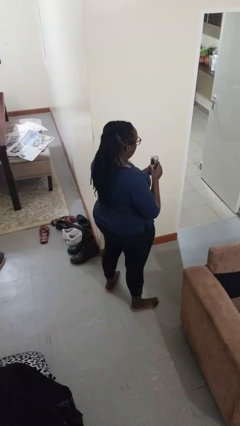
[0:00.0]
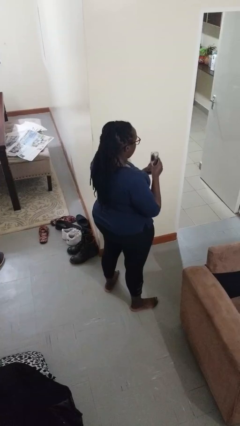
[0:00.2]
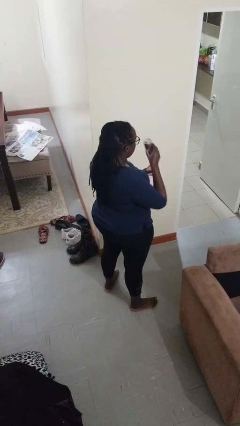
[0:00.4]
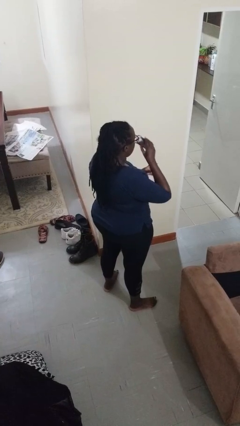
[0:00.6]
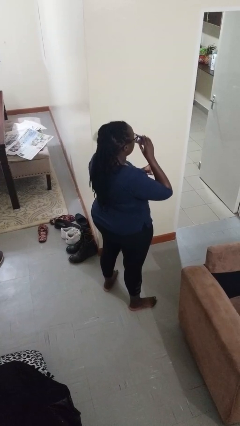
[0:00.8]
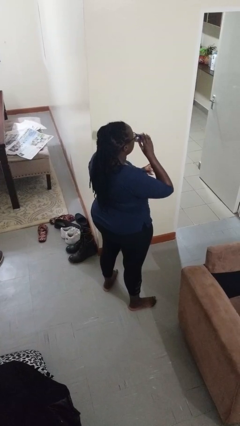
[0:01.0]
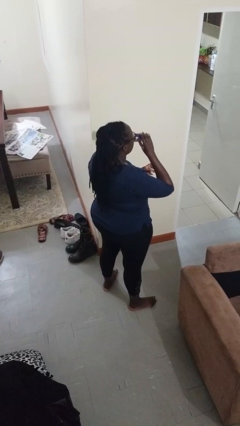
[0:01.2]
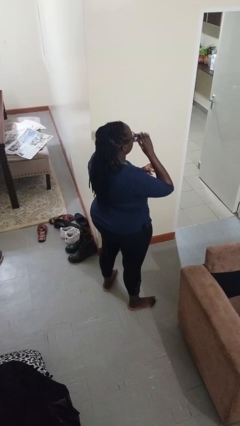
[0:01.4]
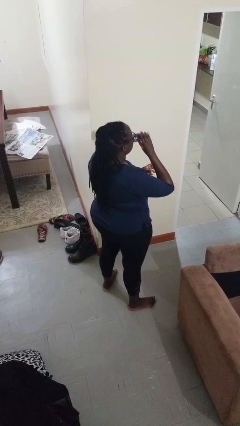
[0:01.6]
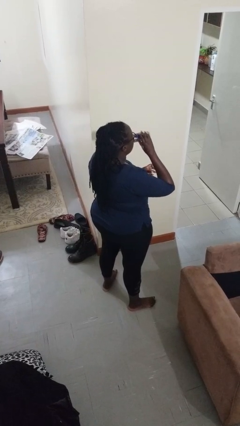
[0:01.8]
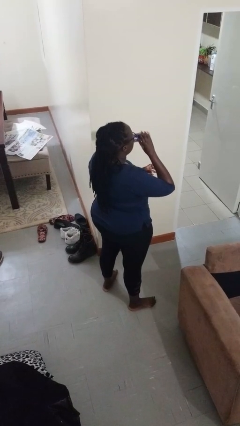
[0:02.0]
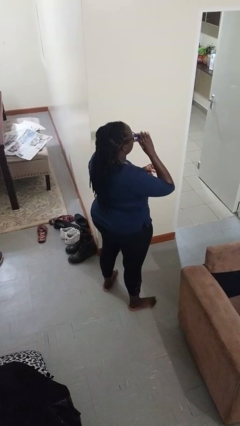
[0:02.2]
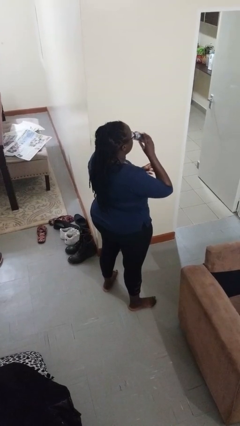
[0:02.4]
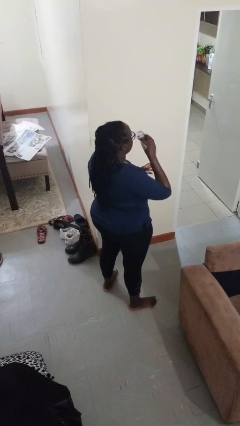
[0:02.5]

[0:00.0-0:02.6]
person drinks from beverage can

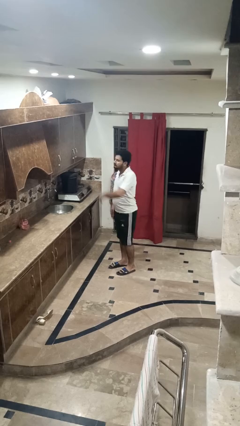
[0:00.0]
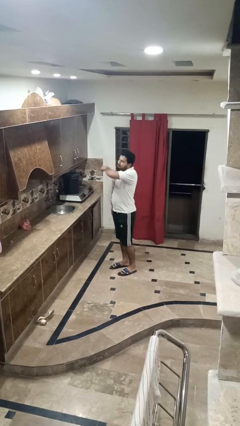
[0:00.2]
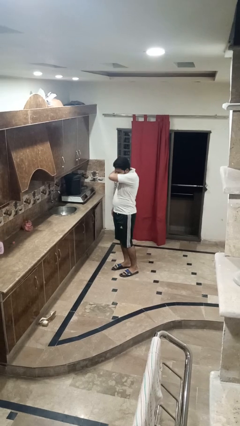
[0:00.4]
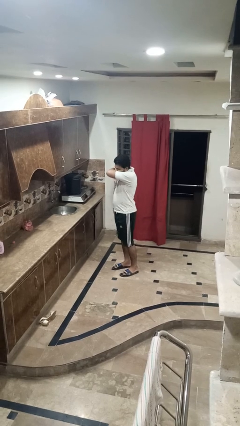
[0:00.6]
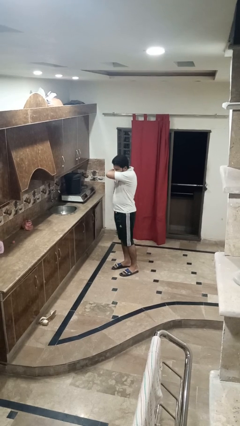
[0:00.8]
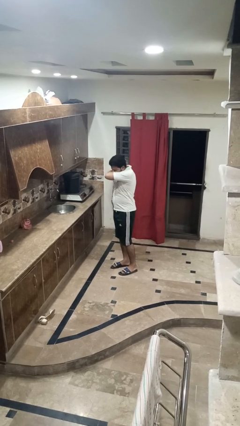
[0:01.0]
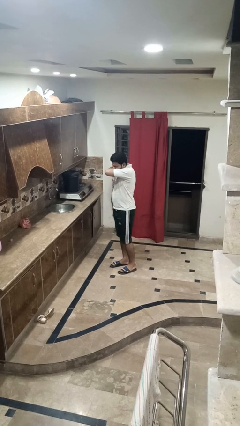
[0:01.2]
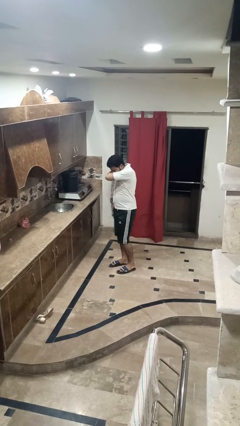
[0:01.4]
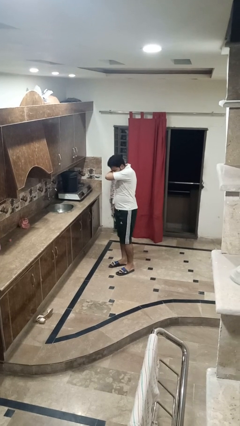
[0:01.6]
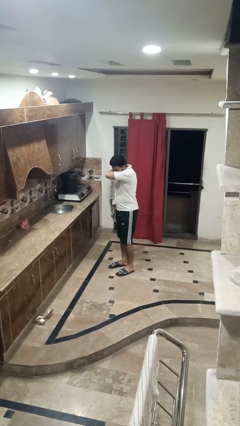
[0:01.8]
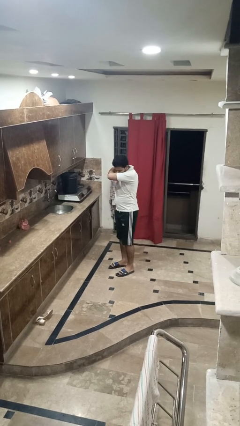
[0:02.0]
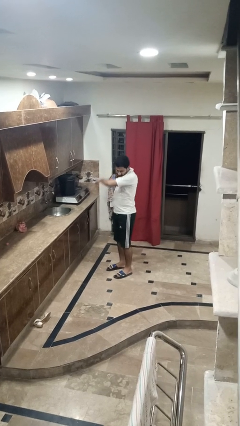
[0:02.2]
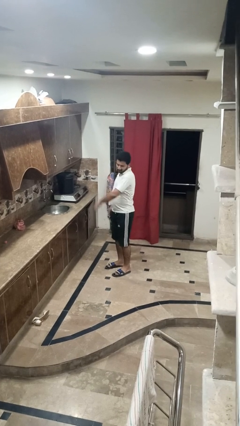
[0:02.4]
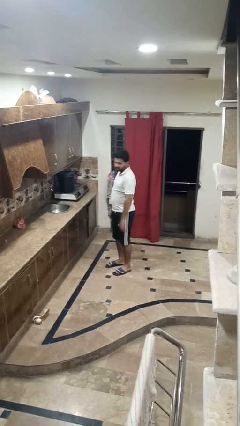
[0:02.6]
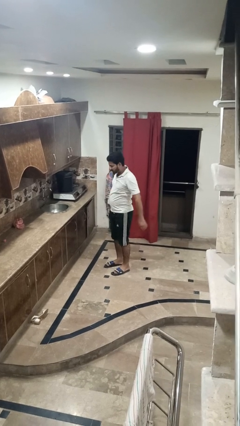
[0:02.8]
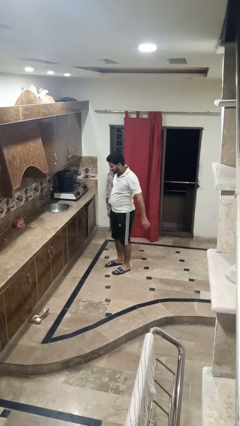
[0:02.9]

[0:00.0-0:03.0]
person sneezes into arm

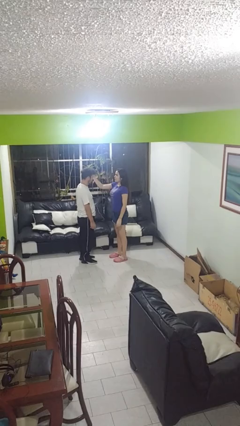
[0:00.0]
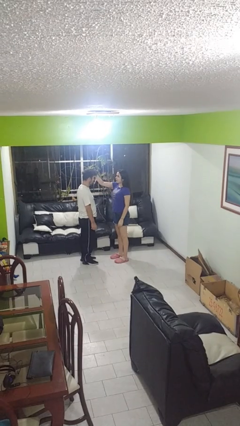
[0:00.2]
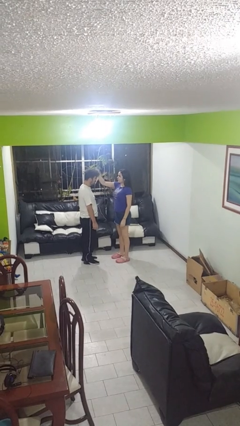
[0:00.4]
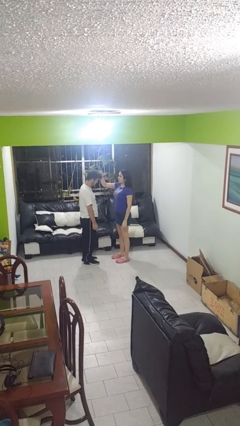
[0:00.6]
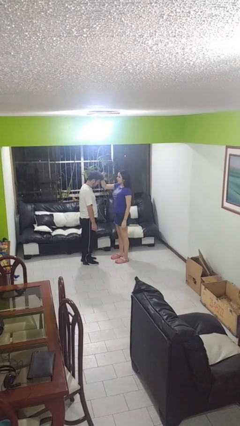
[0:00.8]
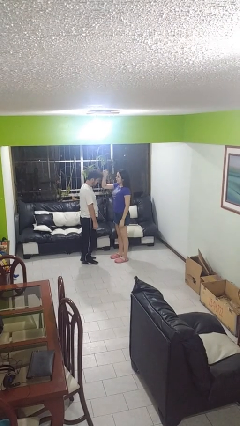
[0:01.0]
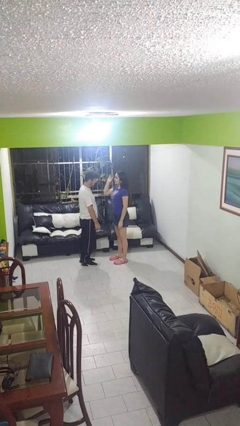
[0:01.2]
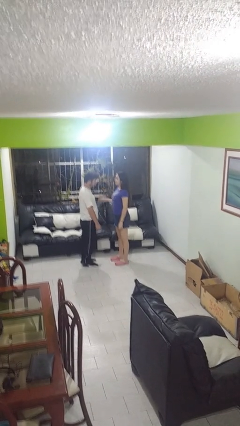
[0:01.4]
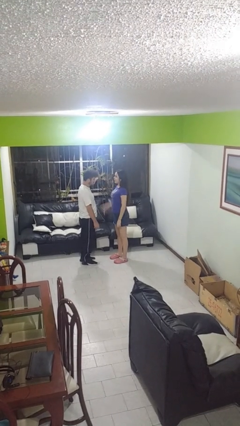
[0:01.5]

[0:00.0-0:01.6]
person grabs person by hair

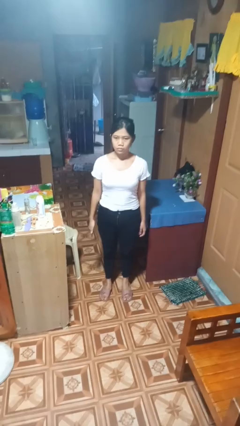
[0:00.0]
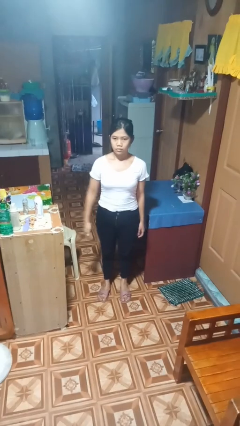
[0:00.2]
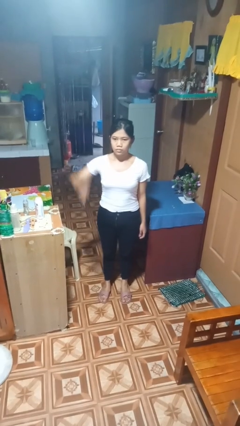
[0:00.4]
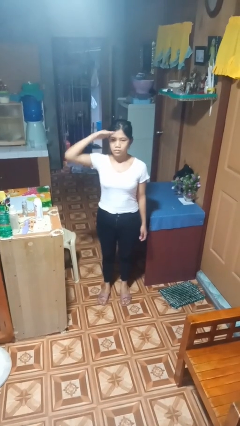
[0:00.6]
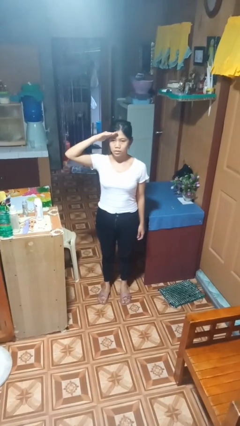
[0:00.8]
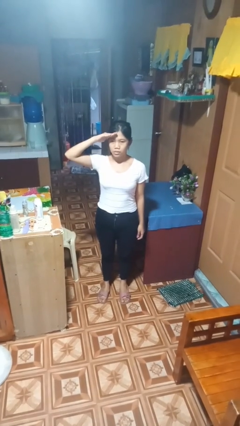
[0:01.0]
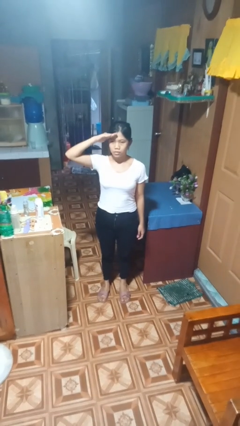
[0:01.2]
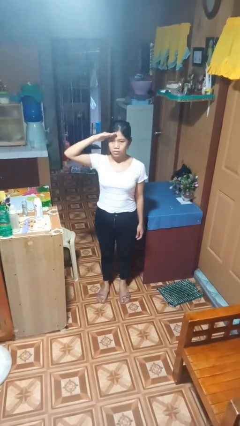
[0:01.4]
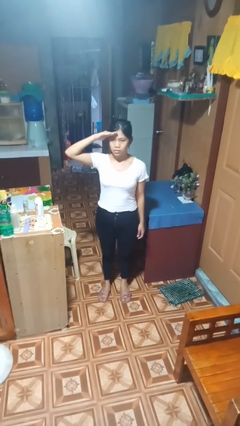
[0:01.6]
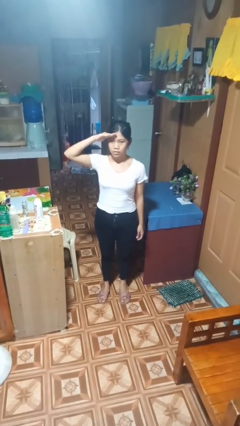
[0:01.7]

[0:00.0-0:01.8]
person salutes

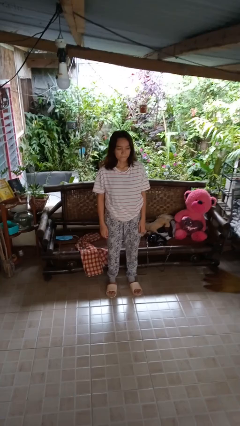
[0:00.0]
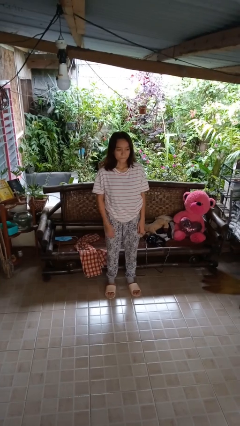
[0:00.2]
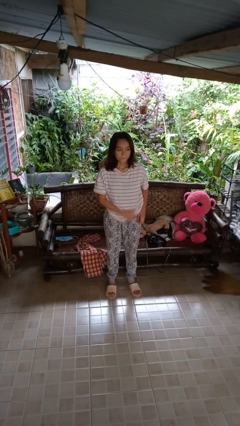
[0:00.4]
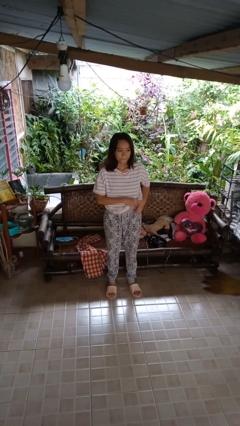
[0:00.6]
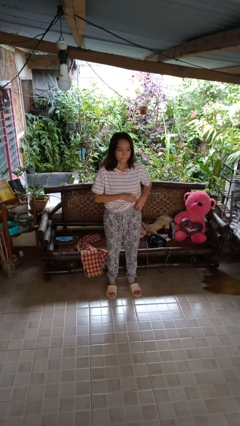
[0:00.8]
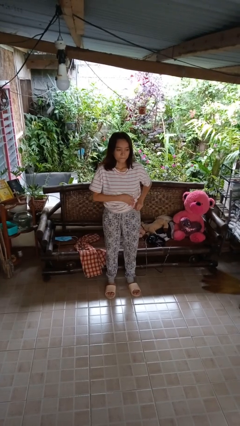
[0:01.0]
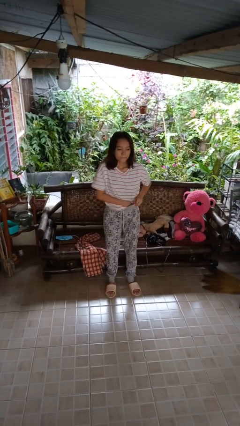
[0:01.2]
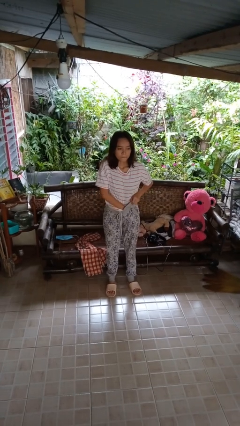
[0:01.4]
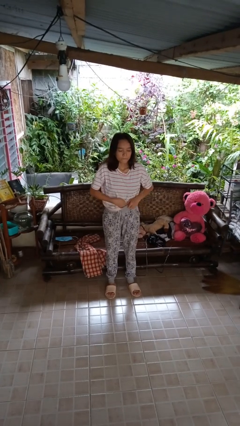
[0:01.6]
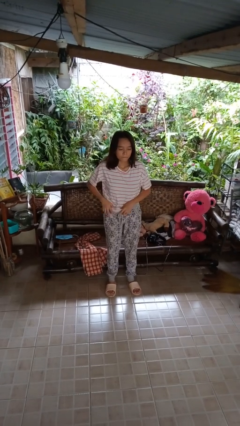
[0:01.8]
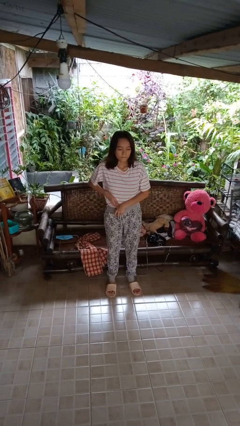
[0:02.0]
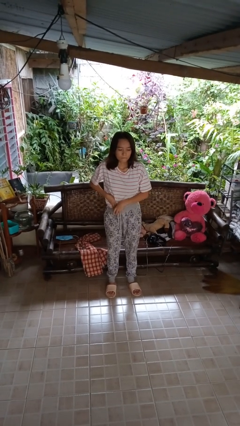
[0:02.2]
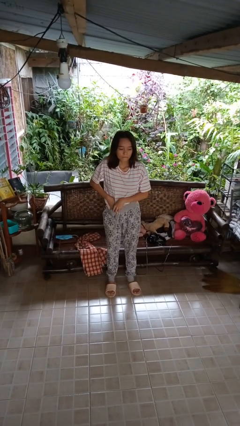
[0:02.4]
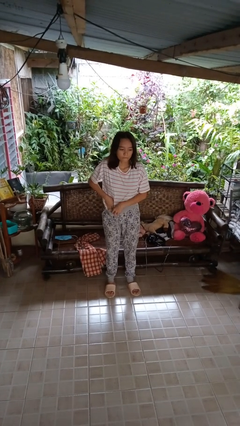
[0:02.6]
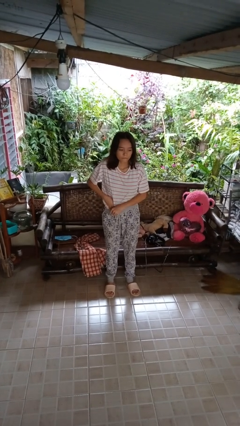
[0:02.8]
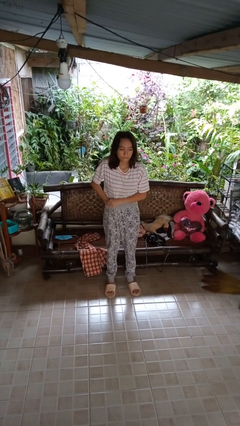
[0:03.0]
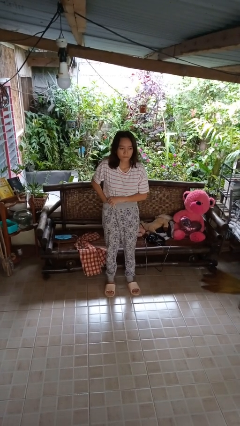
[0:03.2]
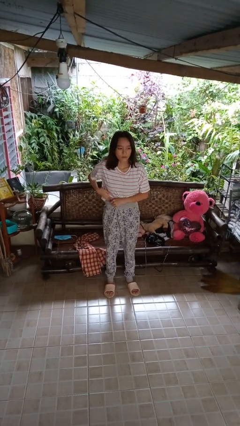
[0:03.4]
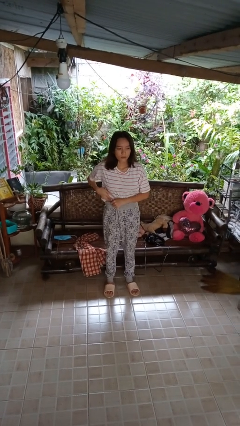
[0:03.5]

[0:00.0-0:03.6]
person tucks in shirt

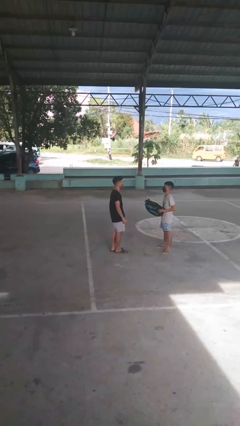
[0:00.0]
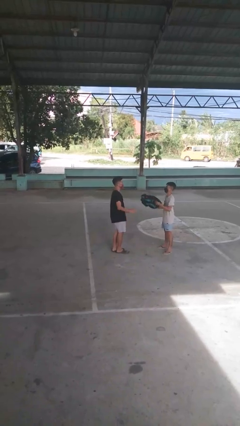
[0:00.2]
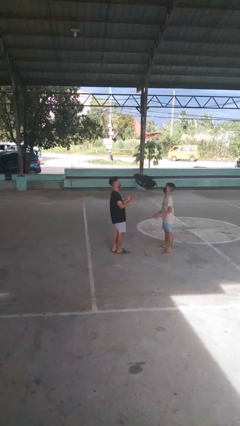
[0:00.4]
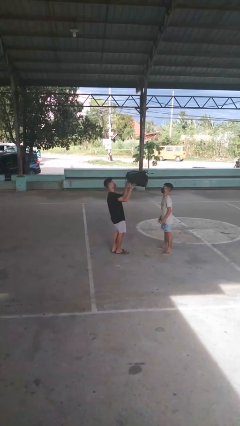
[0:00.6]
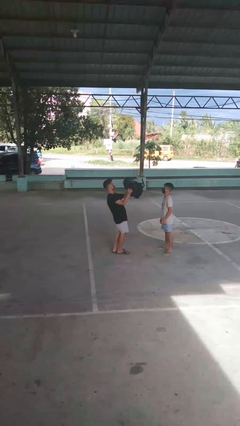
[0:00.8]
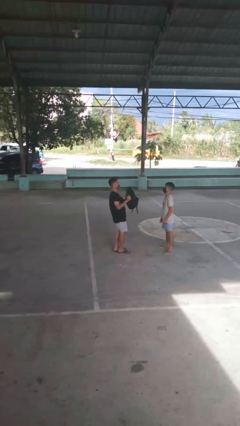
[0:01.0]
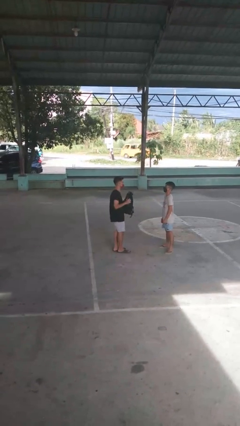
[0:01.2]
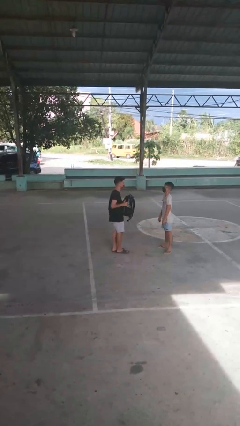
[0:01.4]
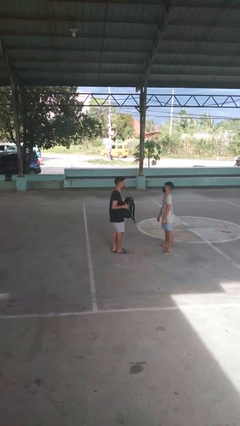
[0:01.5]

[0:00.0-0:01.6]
person catches object from person

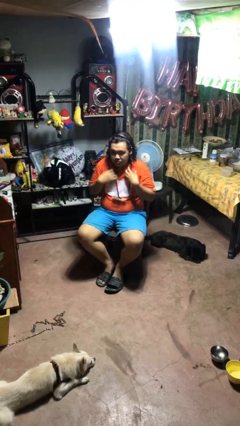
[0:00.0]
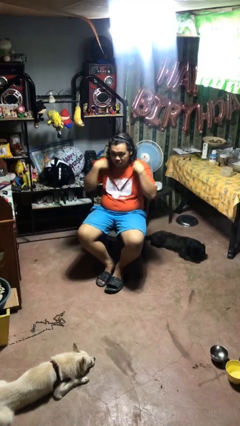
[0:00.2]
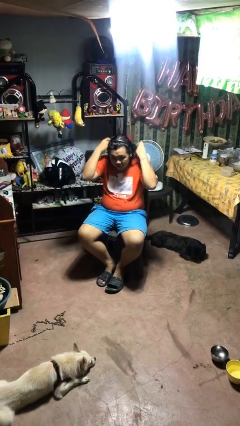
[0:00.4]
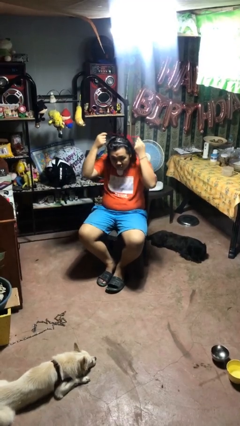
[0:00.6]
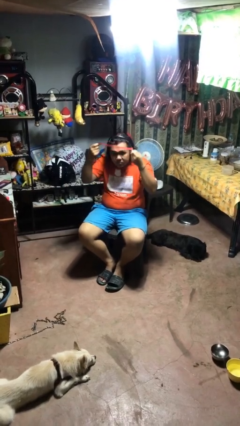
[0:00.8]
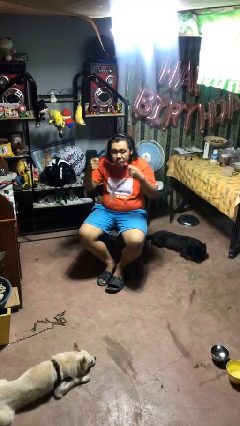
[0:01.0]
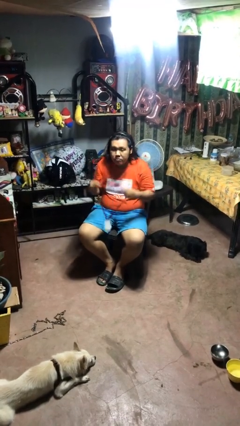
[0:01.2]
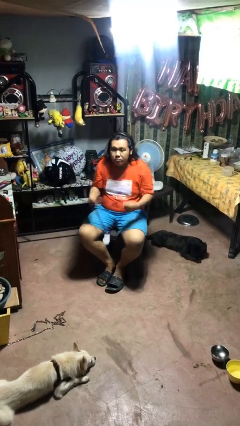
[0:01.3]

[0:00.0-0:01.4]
person takes off necklace

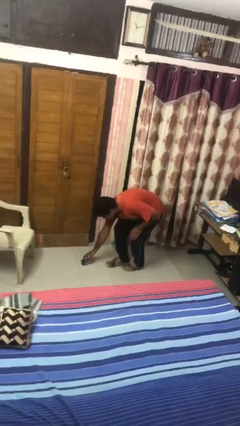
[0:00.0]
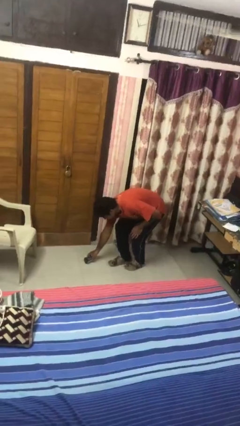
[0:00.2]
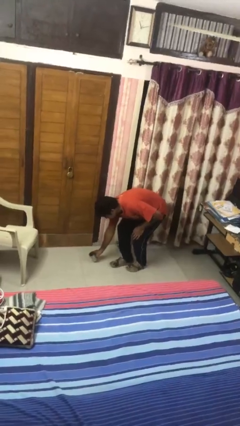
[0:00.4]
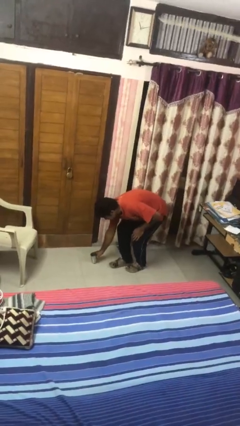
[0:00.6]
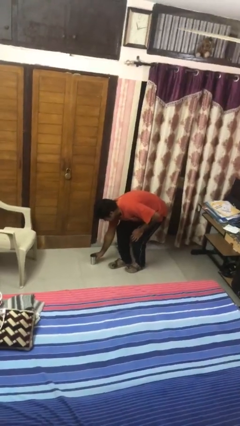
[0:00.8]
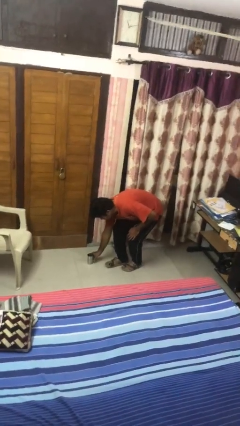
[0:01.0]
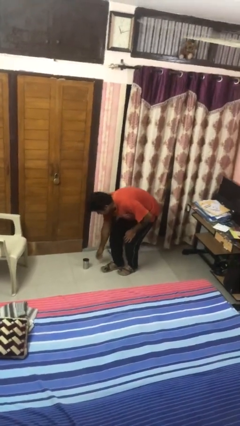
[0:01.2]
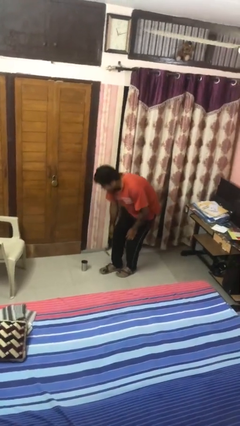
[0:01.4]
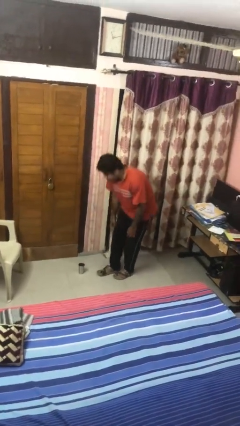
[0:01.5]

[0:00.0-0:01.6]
person sets upright glass
